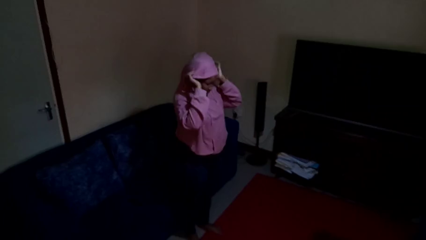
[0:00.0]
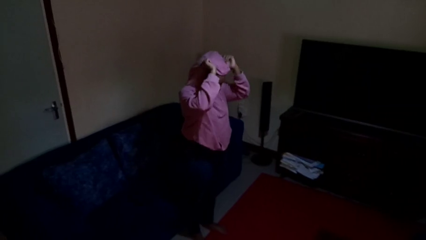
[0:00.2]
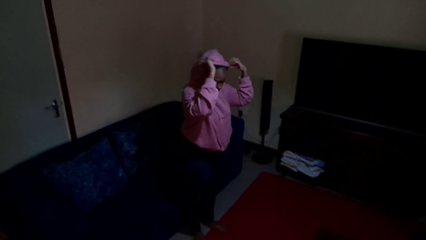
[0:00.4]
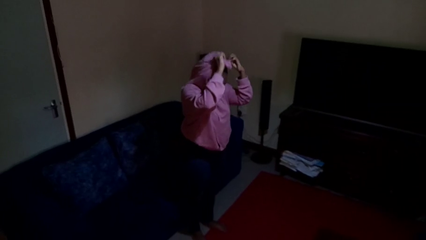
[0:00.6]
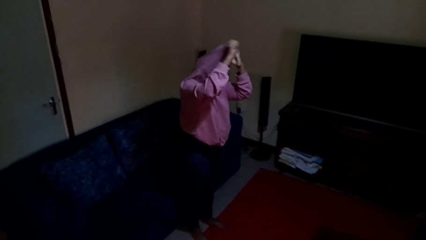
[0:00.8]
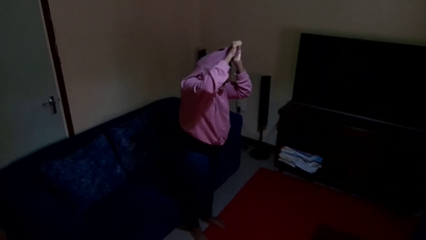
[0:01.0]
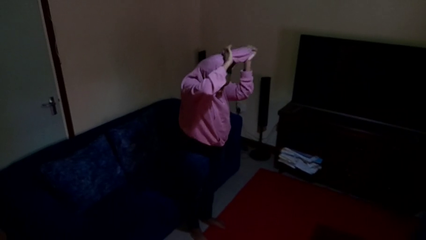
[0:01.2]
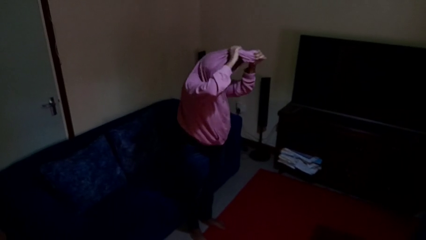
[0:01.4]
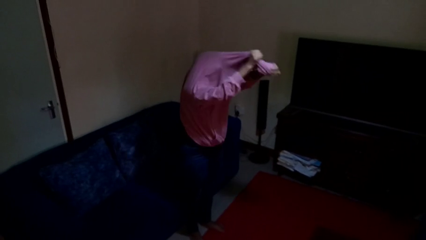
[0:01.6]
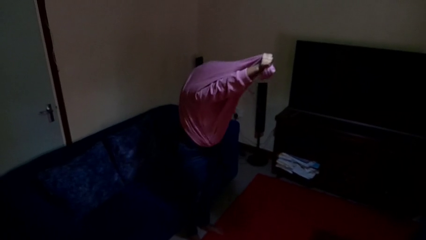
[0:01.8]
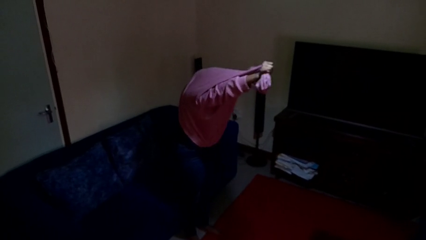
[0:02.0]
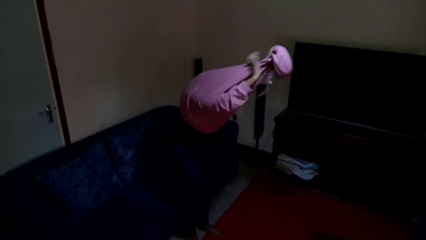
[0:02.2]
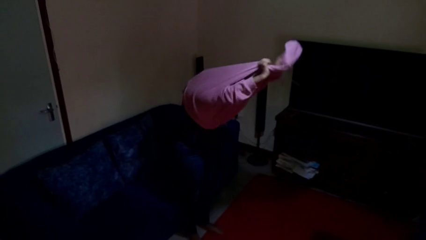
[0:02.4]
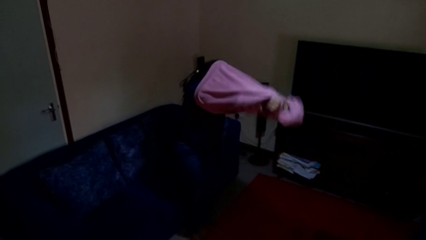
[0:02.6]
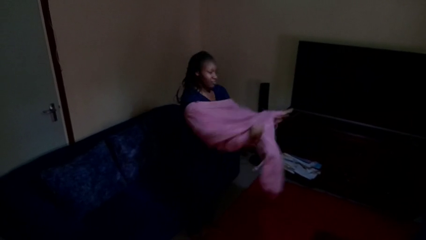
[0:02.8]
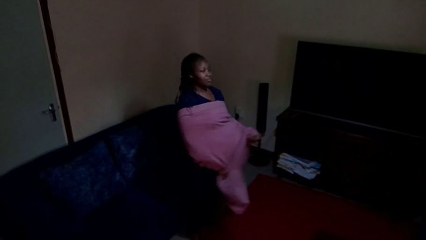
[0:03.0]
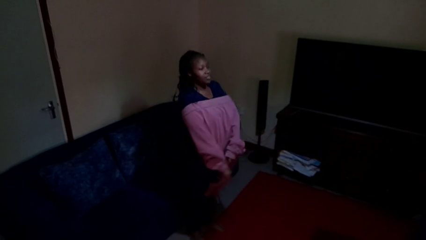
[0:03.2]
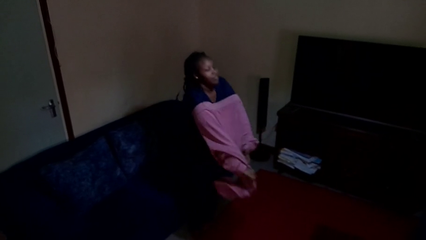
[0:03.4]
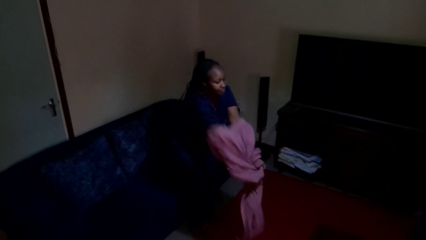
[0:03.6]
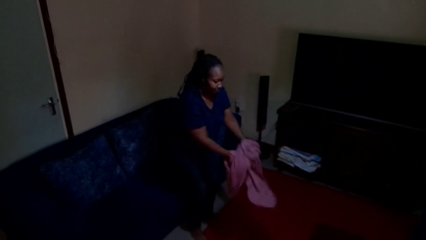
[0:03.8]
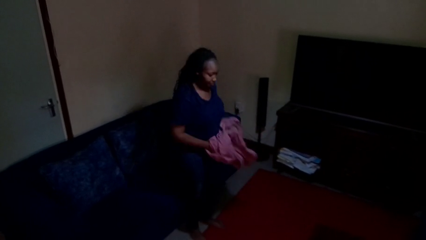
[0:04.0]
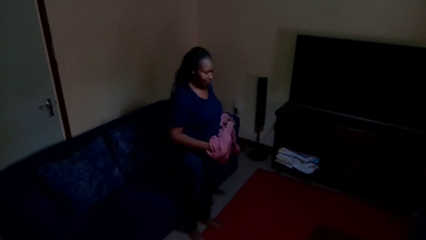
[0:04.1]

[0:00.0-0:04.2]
person takes off hoodie

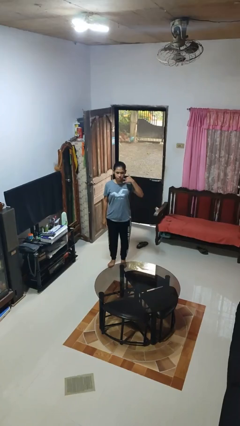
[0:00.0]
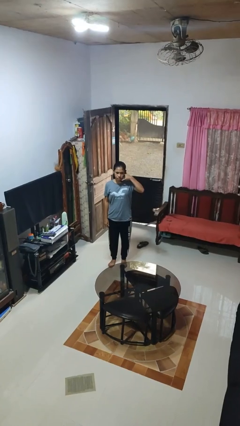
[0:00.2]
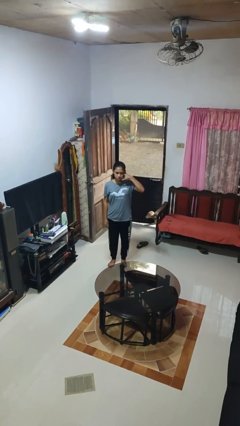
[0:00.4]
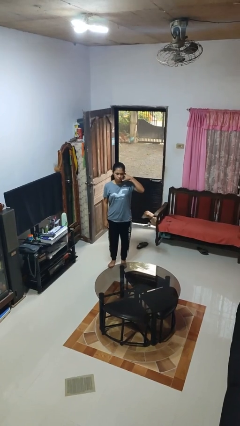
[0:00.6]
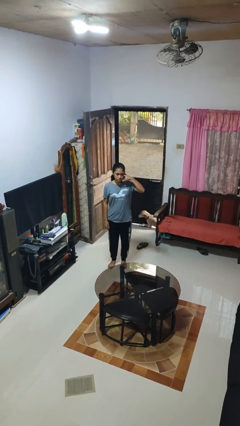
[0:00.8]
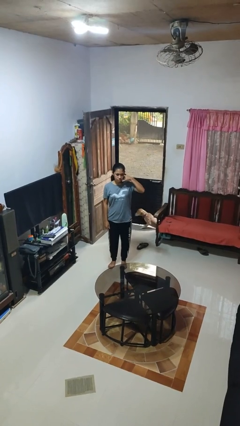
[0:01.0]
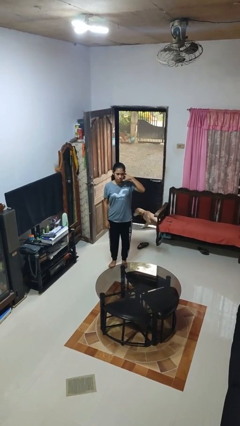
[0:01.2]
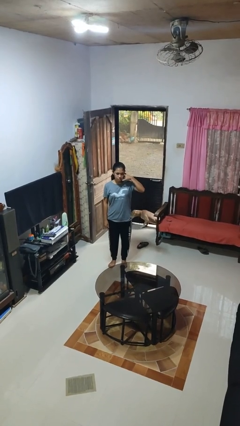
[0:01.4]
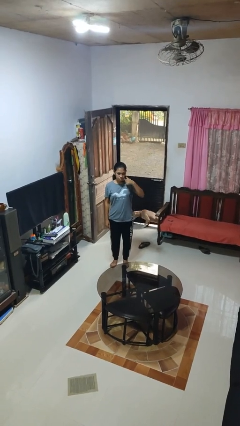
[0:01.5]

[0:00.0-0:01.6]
person gestures call me

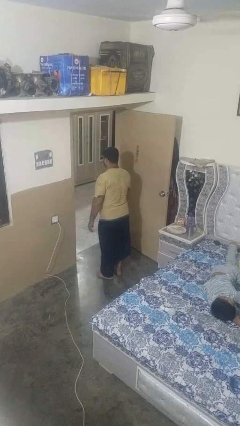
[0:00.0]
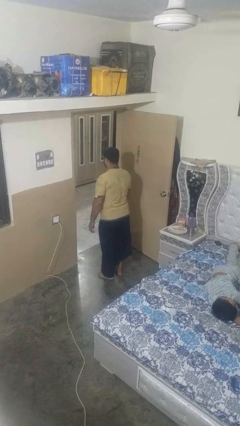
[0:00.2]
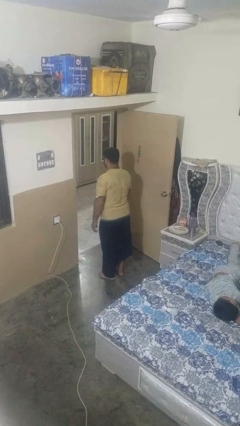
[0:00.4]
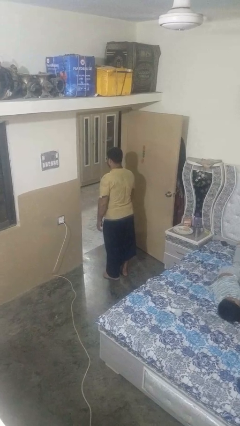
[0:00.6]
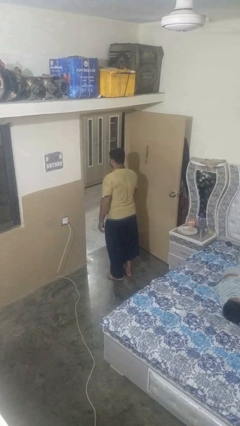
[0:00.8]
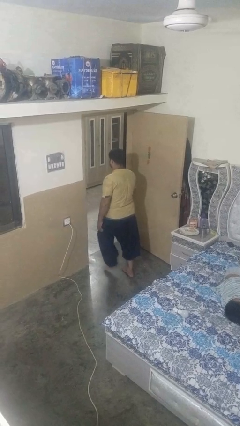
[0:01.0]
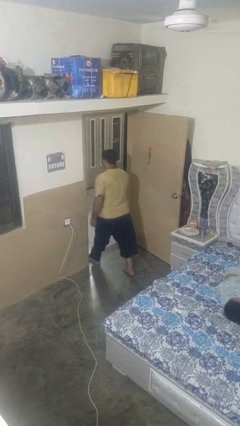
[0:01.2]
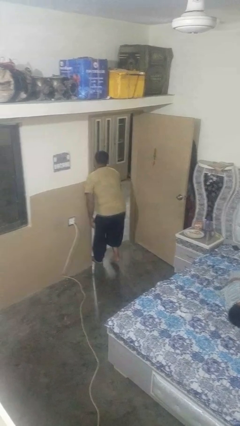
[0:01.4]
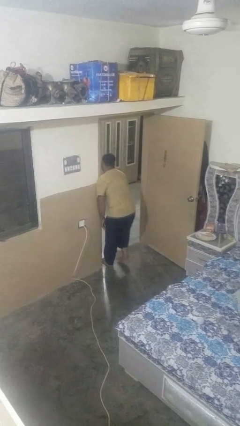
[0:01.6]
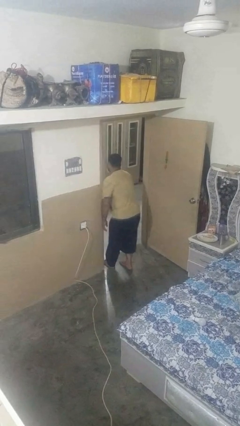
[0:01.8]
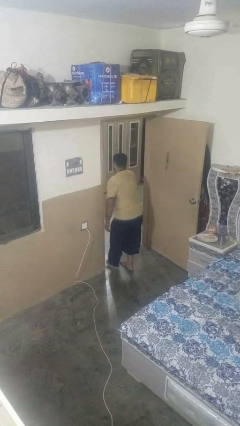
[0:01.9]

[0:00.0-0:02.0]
person bumps into wall

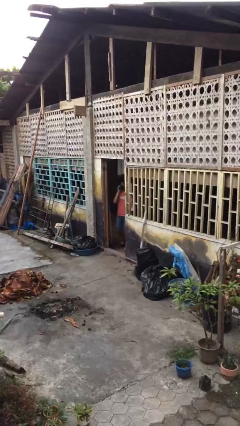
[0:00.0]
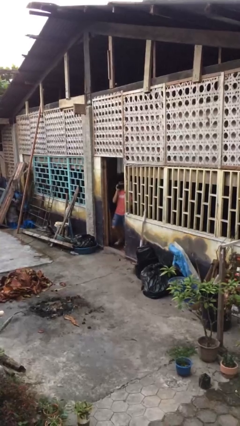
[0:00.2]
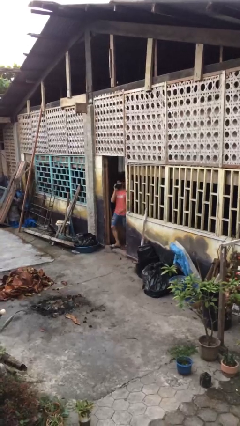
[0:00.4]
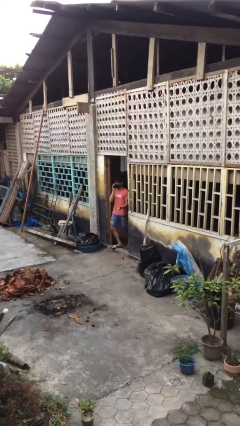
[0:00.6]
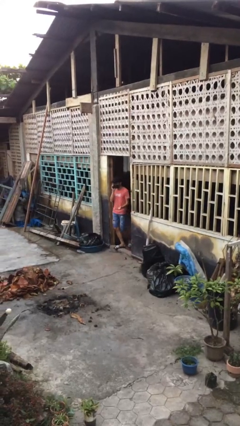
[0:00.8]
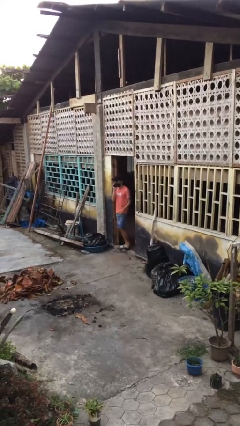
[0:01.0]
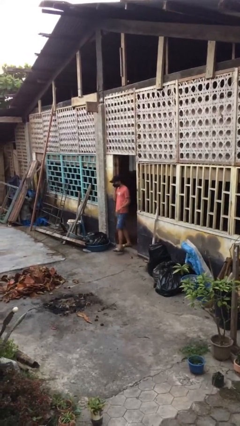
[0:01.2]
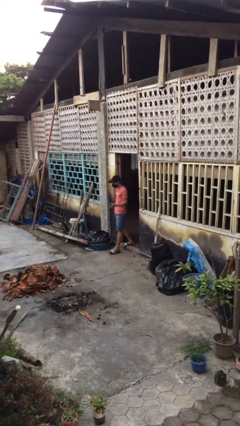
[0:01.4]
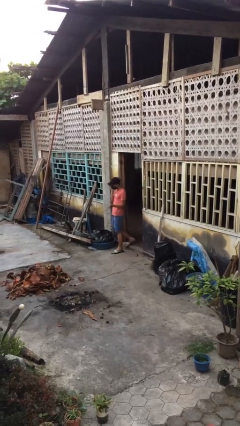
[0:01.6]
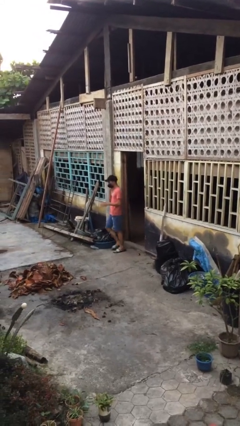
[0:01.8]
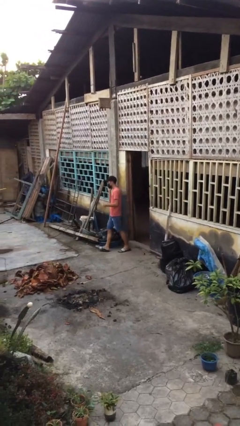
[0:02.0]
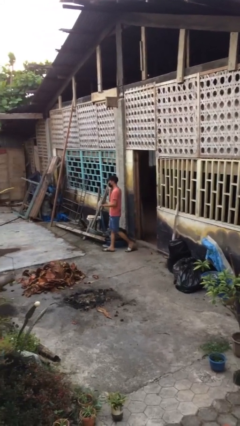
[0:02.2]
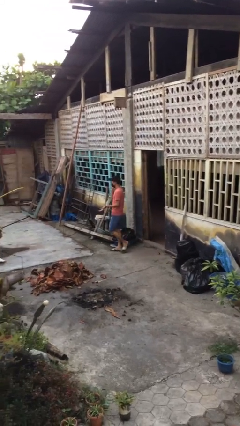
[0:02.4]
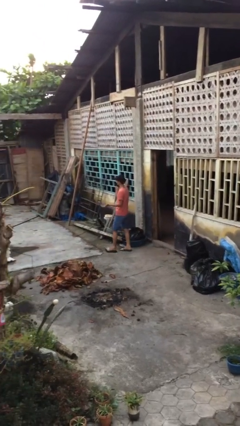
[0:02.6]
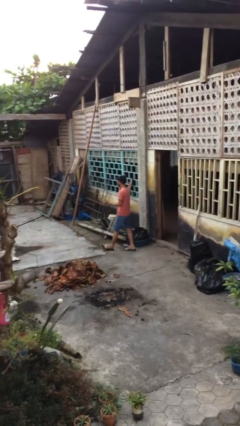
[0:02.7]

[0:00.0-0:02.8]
person enters scene through structure

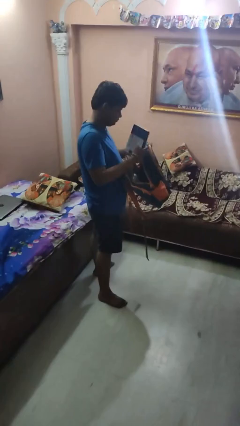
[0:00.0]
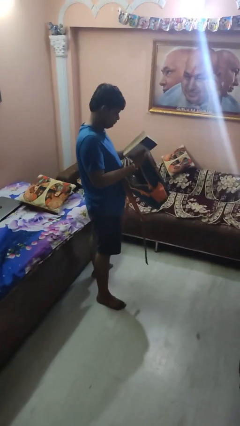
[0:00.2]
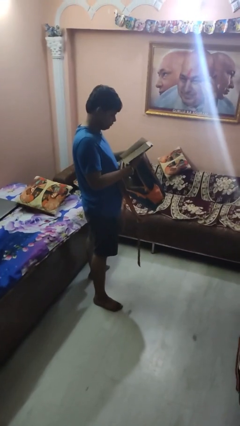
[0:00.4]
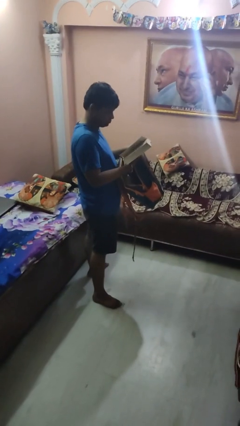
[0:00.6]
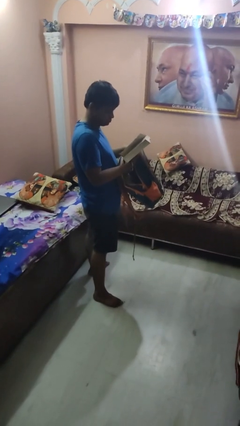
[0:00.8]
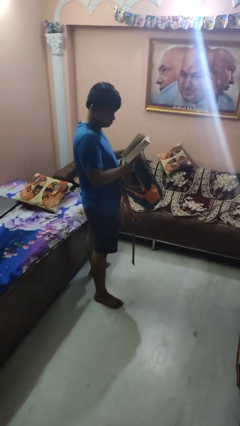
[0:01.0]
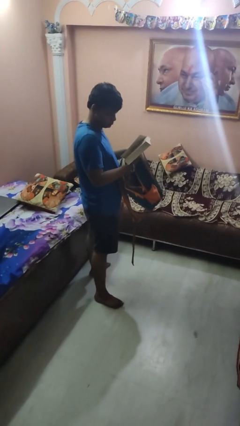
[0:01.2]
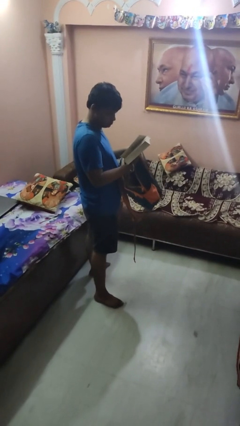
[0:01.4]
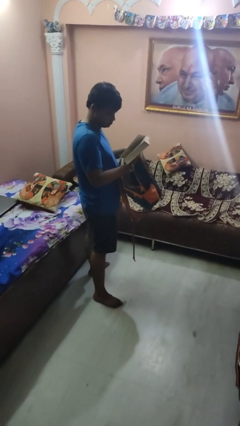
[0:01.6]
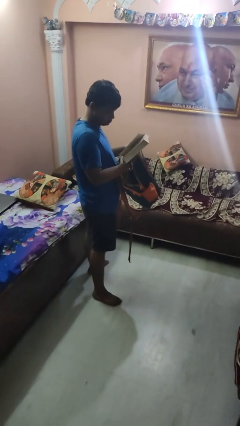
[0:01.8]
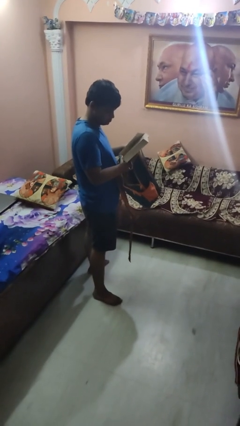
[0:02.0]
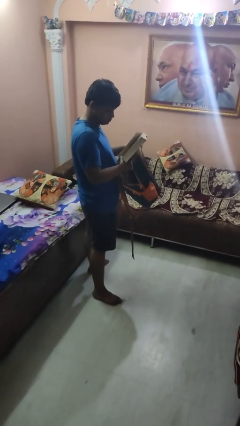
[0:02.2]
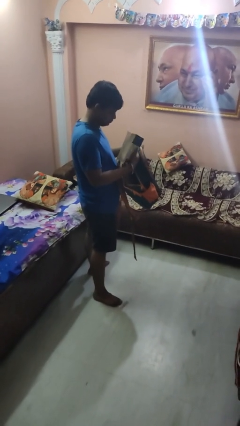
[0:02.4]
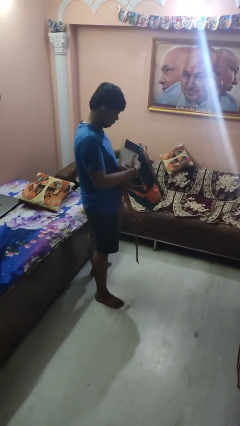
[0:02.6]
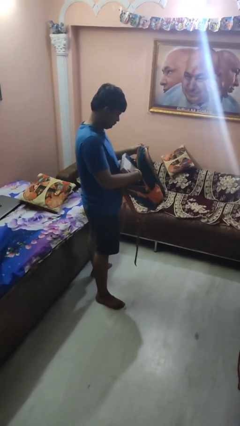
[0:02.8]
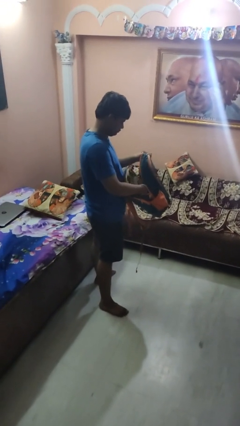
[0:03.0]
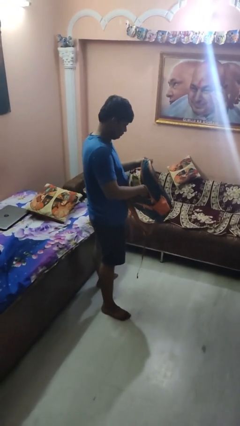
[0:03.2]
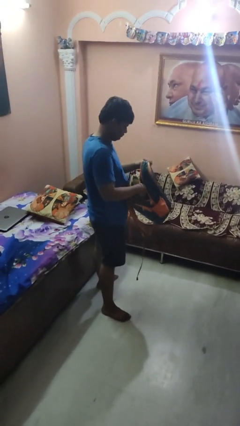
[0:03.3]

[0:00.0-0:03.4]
person takes object from backpack

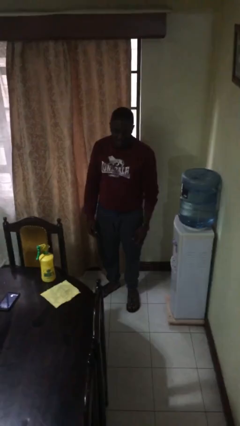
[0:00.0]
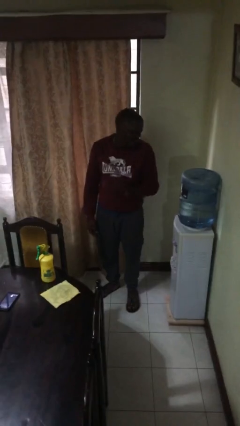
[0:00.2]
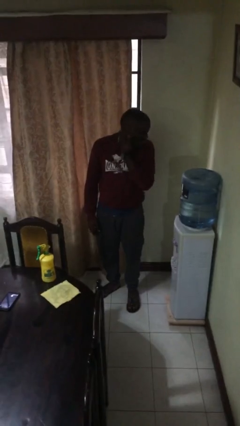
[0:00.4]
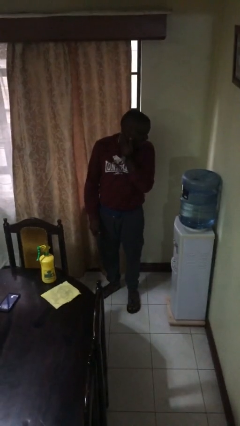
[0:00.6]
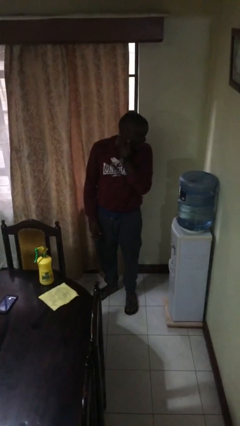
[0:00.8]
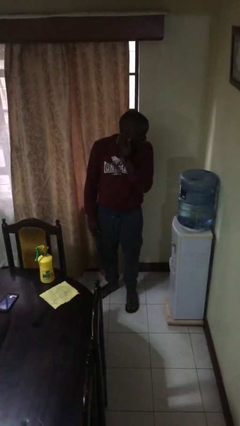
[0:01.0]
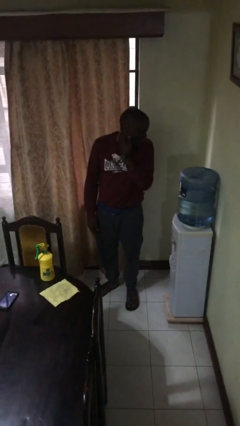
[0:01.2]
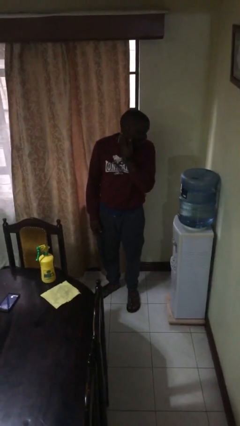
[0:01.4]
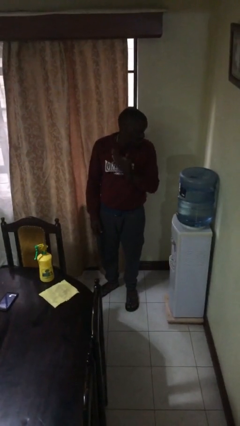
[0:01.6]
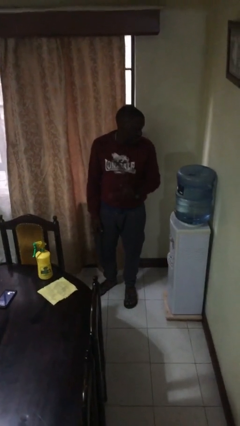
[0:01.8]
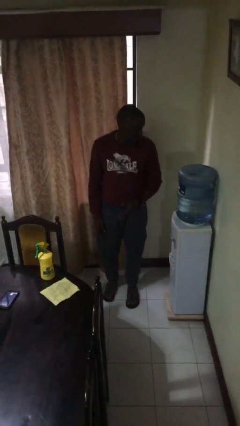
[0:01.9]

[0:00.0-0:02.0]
person swats bug

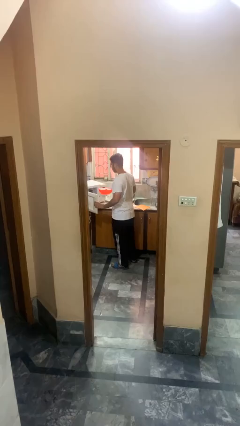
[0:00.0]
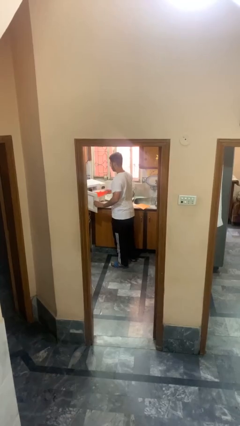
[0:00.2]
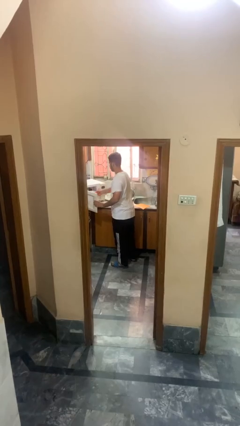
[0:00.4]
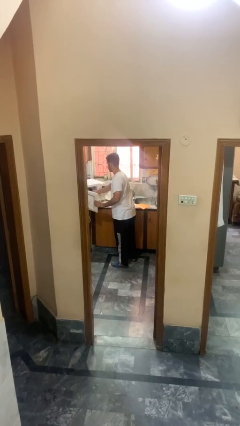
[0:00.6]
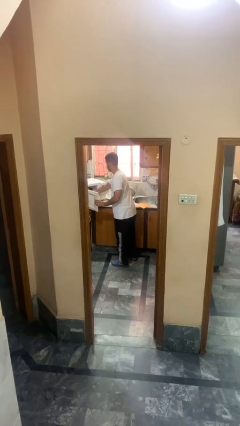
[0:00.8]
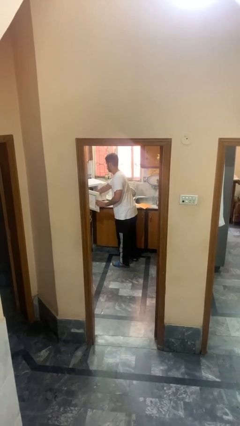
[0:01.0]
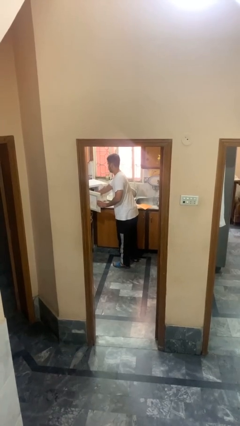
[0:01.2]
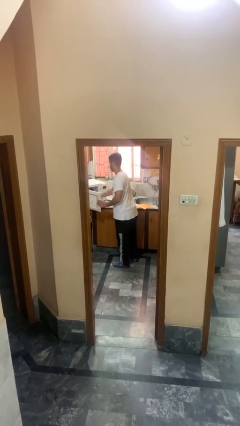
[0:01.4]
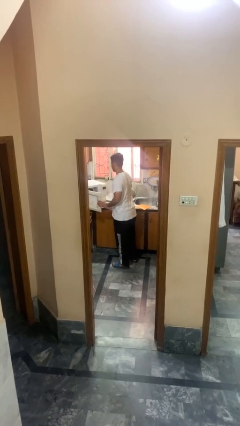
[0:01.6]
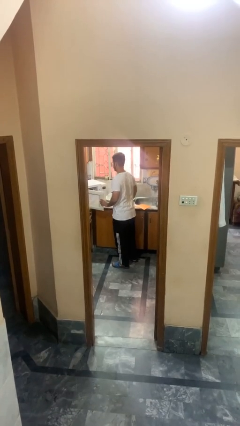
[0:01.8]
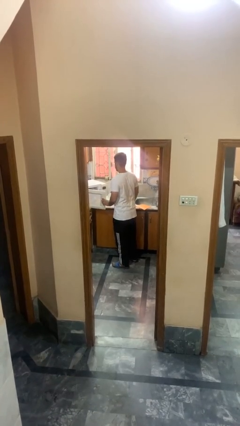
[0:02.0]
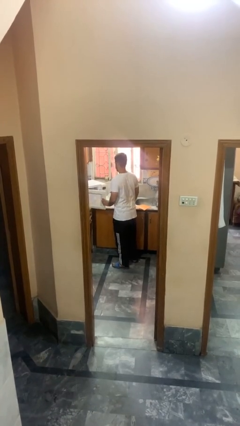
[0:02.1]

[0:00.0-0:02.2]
person puts object into microwave
